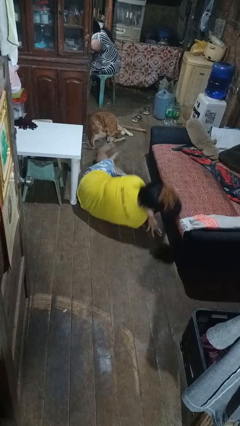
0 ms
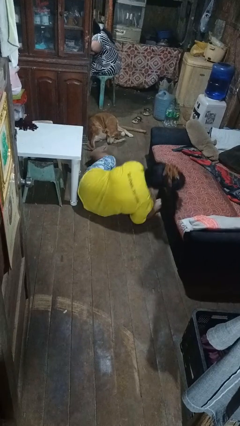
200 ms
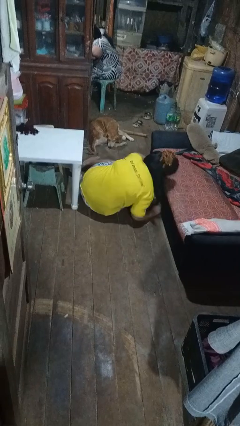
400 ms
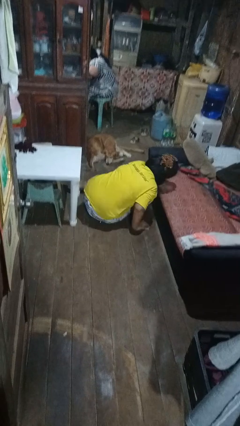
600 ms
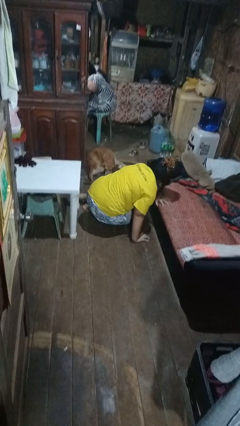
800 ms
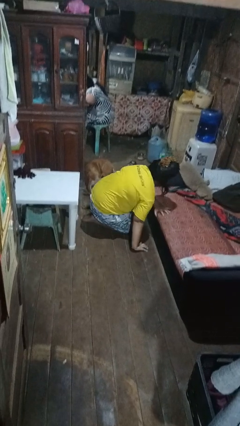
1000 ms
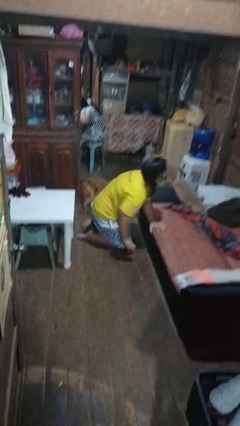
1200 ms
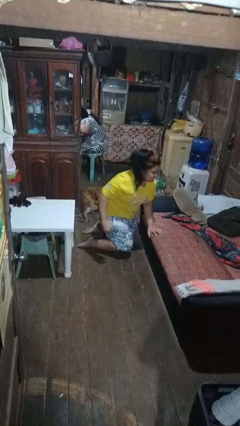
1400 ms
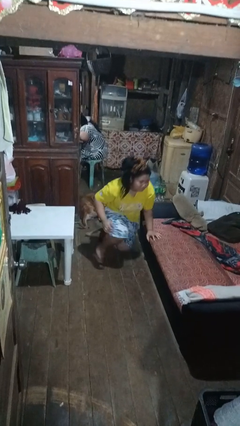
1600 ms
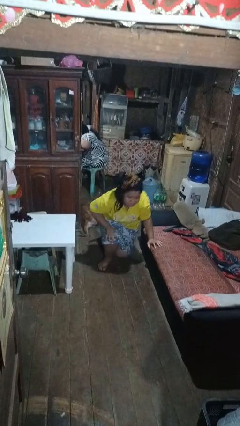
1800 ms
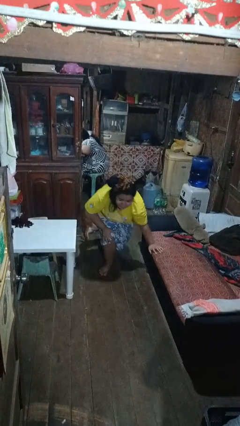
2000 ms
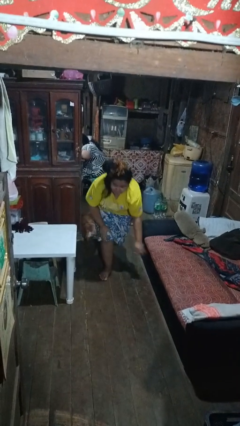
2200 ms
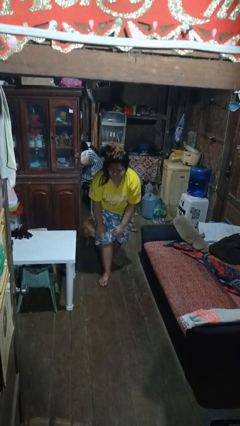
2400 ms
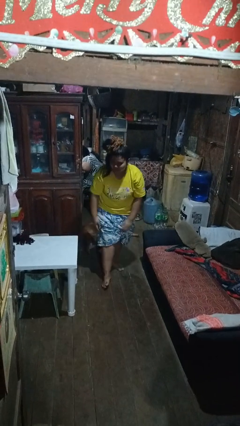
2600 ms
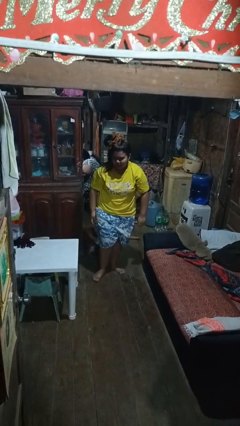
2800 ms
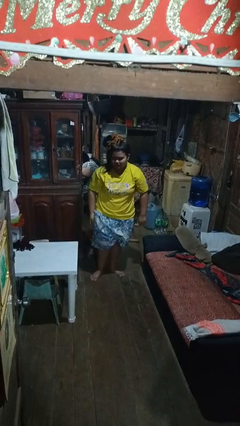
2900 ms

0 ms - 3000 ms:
person stands up from floor

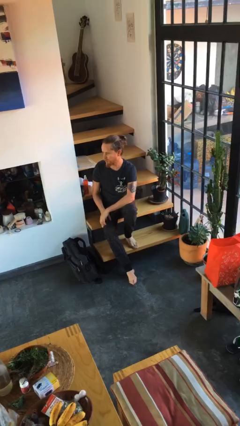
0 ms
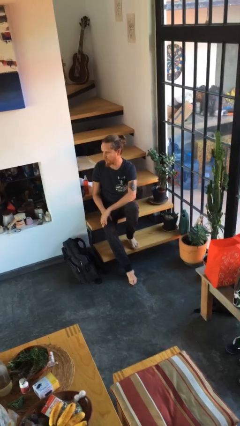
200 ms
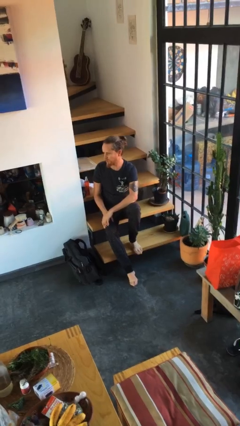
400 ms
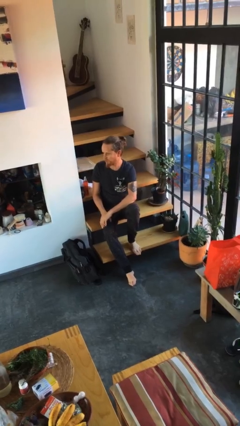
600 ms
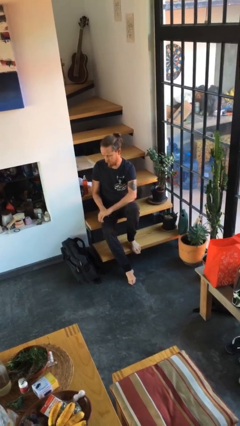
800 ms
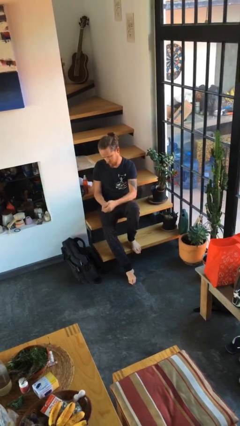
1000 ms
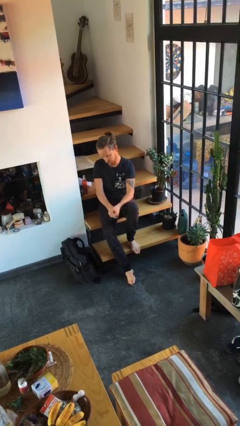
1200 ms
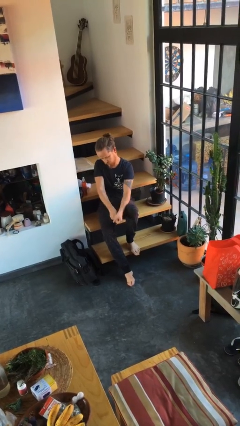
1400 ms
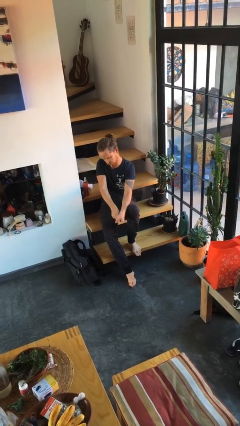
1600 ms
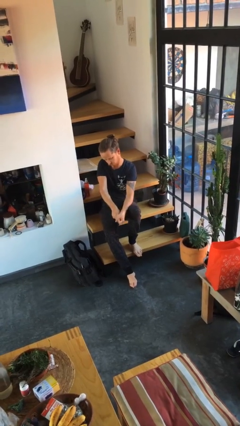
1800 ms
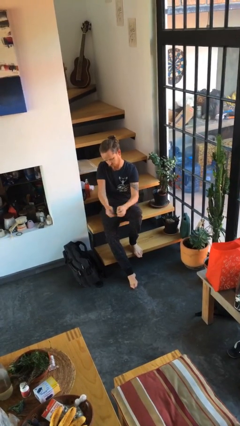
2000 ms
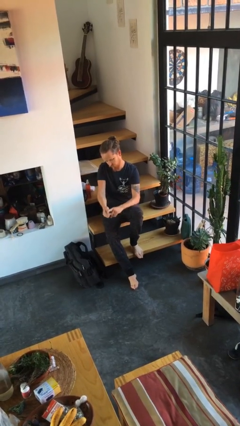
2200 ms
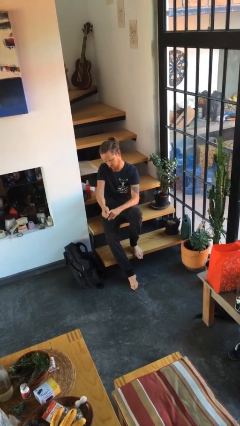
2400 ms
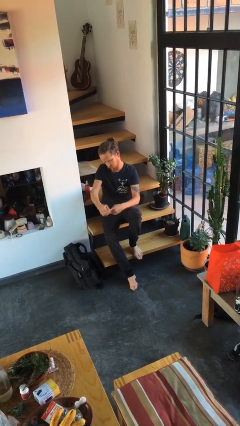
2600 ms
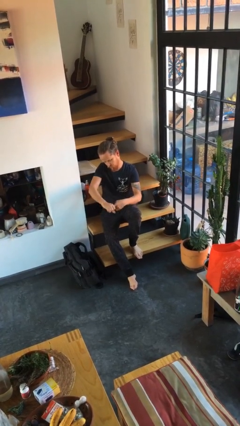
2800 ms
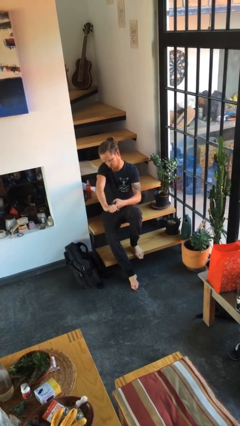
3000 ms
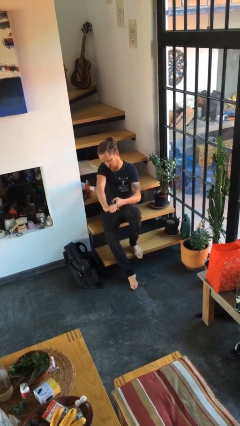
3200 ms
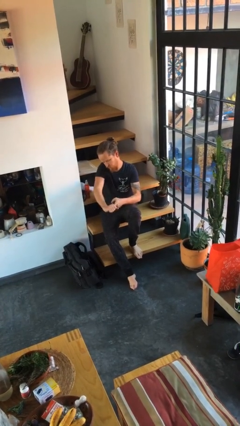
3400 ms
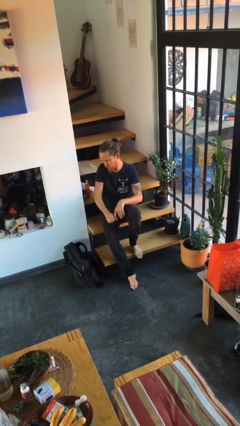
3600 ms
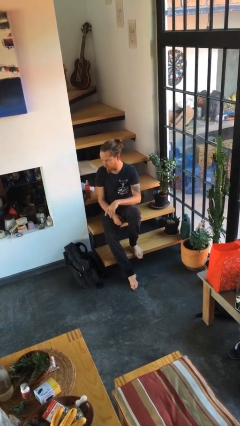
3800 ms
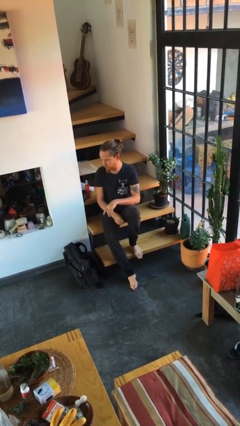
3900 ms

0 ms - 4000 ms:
person cracks knuckles

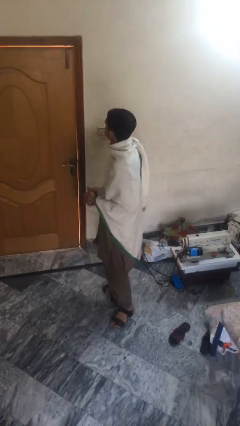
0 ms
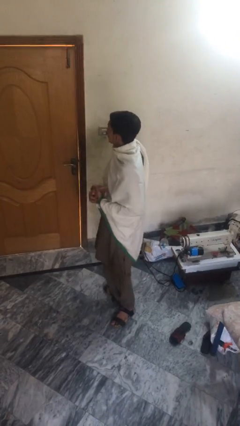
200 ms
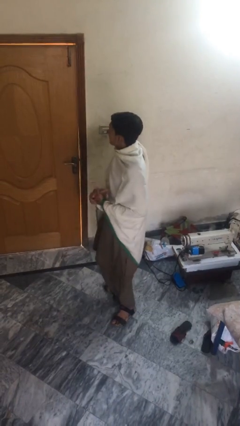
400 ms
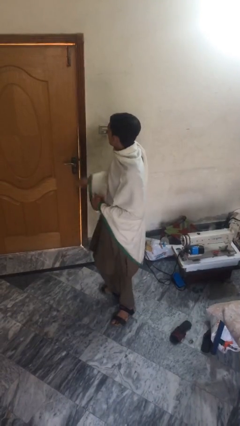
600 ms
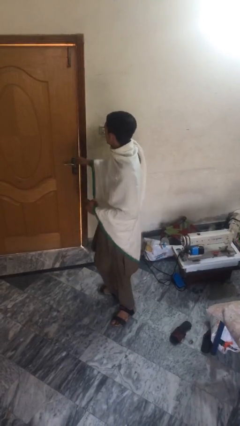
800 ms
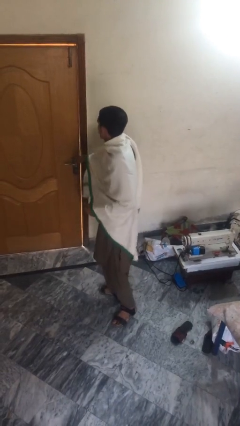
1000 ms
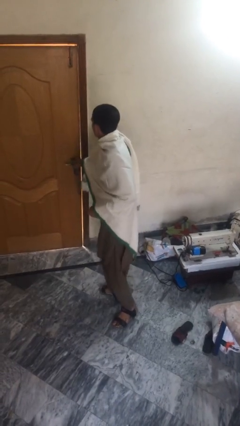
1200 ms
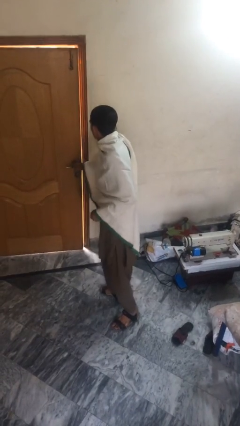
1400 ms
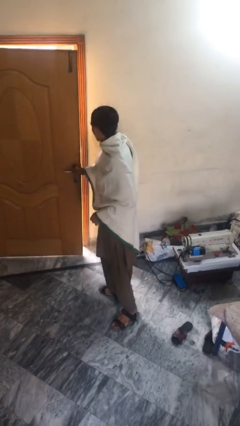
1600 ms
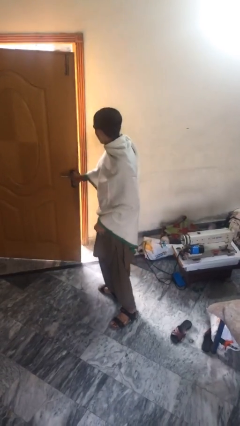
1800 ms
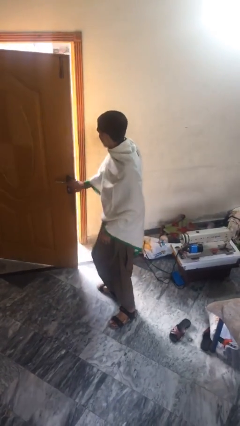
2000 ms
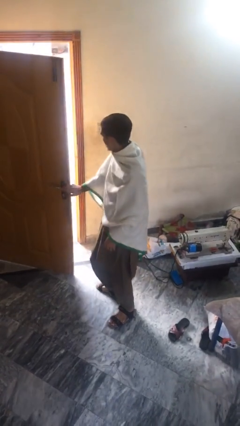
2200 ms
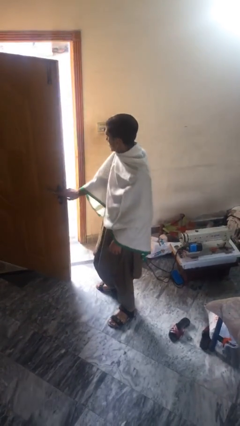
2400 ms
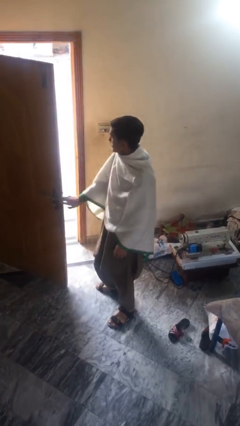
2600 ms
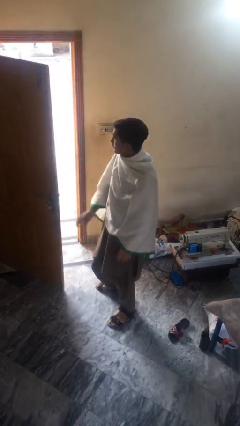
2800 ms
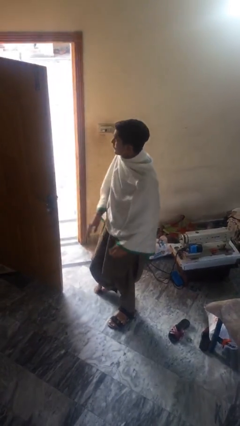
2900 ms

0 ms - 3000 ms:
person opens facility door

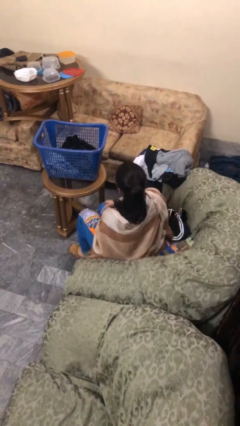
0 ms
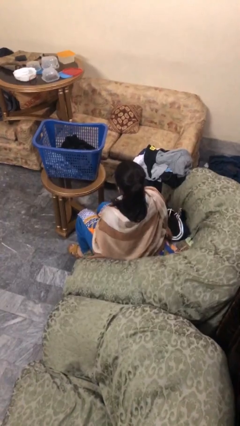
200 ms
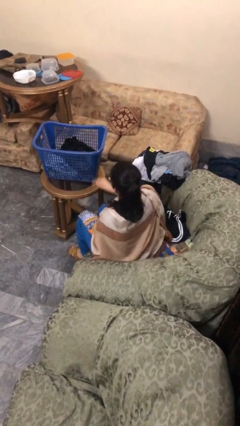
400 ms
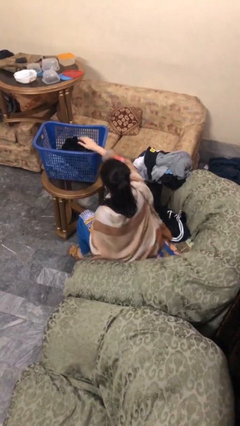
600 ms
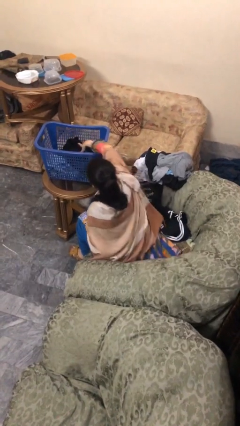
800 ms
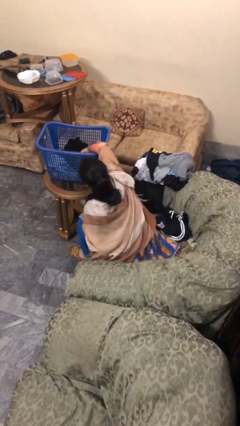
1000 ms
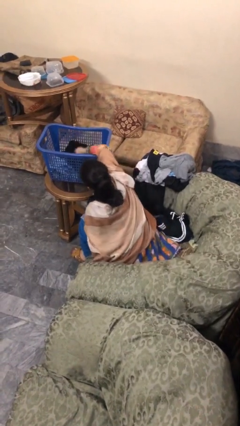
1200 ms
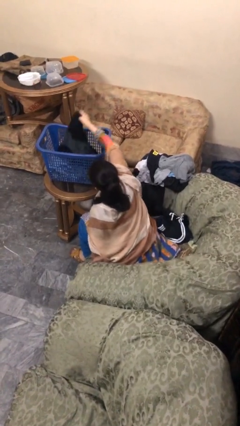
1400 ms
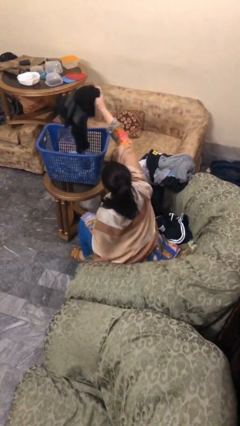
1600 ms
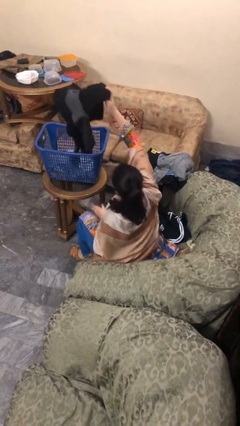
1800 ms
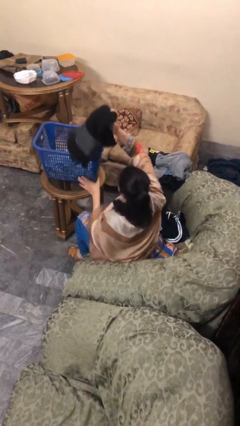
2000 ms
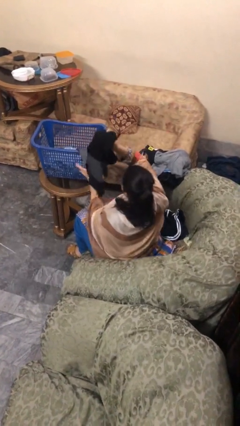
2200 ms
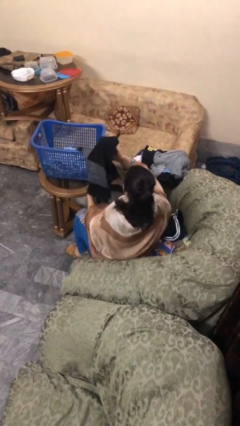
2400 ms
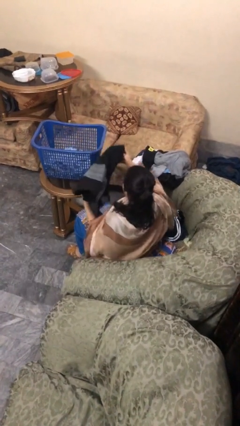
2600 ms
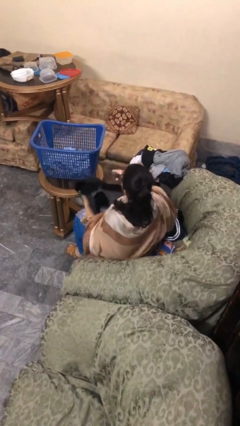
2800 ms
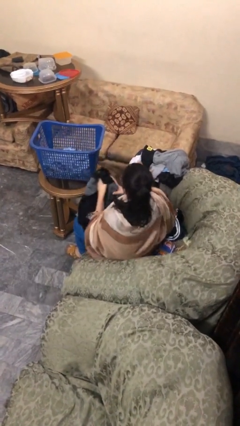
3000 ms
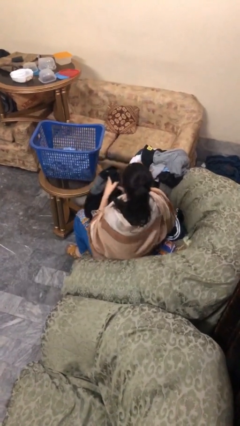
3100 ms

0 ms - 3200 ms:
person takes object from basket

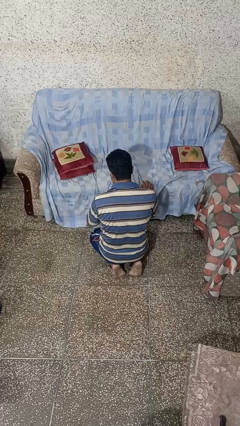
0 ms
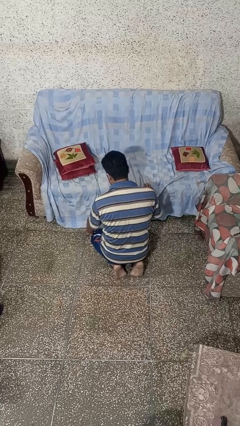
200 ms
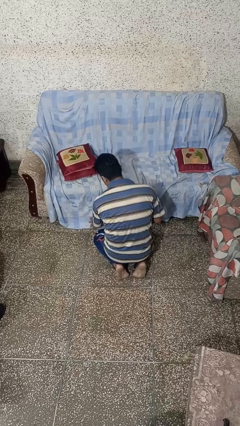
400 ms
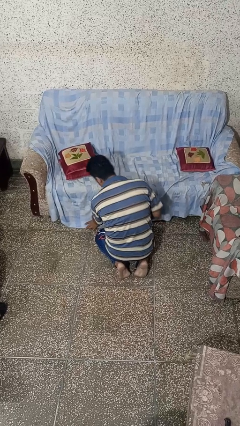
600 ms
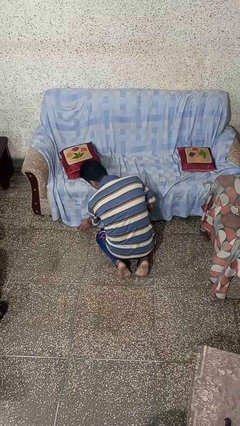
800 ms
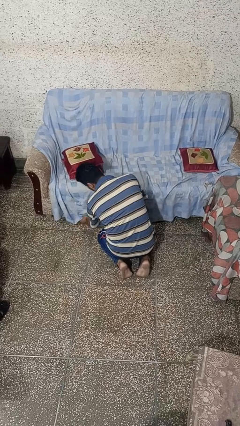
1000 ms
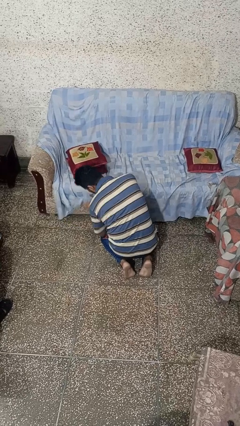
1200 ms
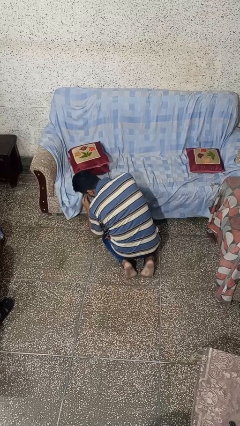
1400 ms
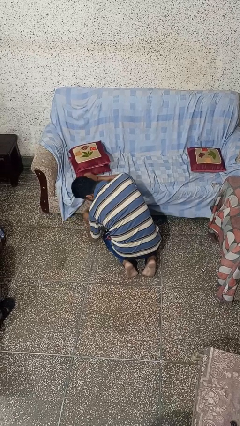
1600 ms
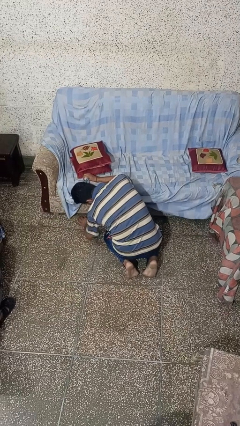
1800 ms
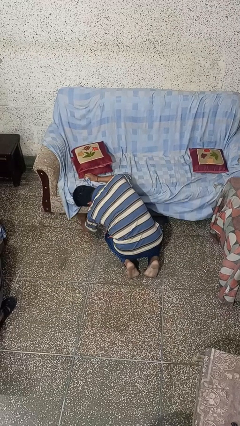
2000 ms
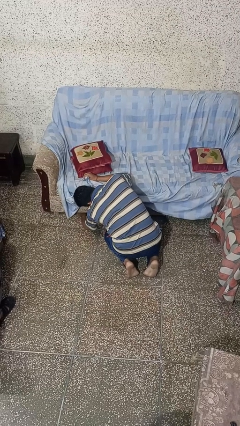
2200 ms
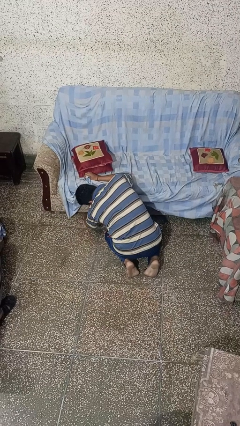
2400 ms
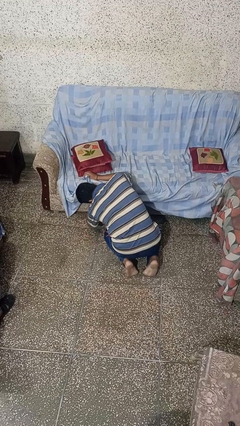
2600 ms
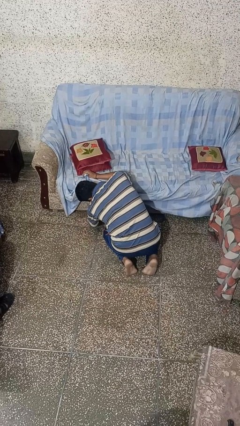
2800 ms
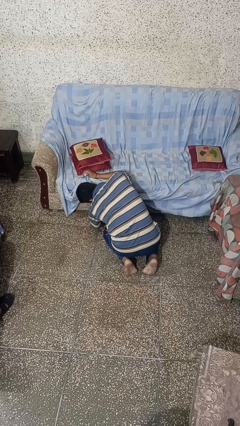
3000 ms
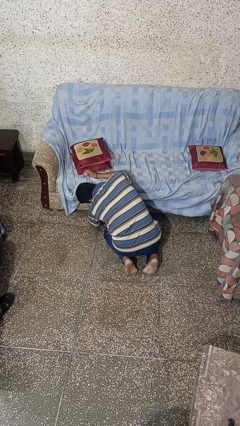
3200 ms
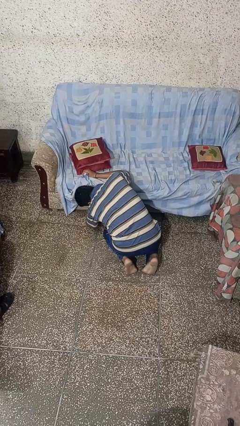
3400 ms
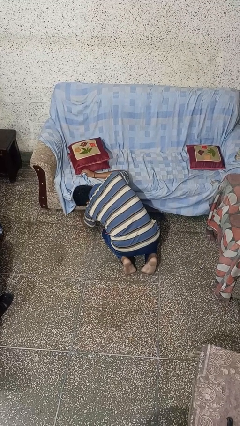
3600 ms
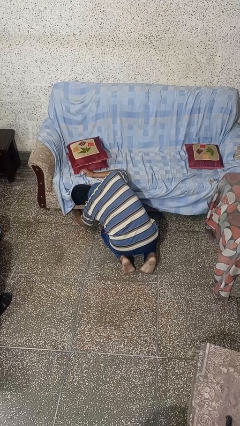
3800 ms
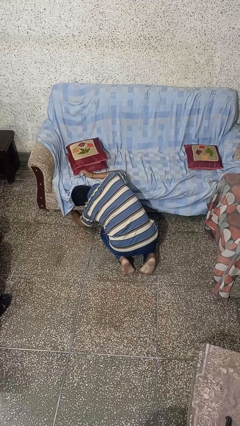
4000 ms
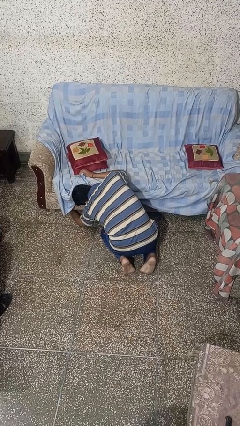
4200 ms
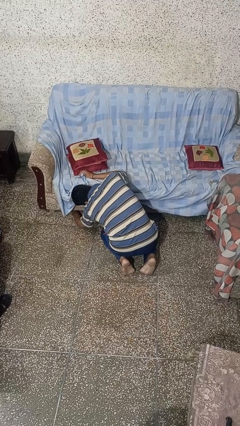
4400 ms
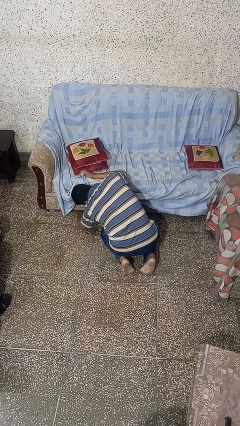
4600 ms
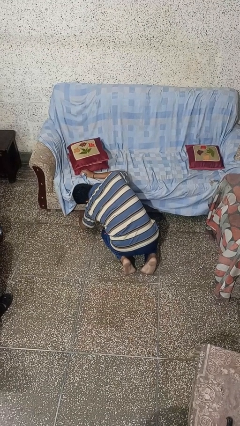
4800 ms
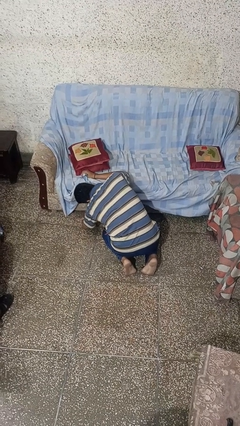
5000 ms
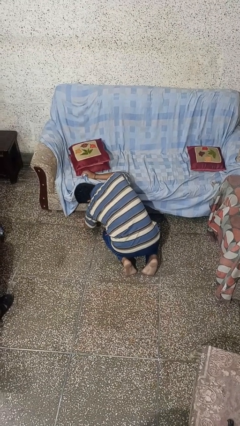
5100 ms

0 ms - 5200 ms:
person searches under couch
